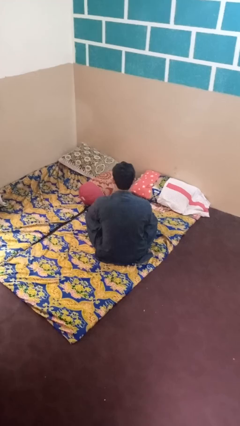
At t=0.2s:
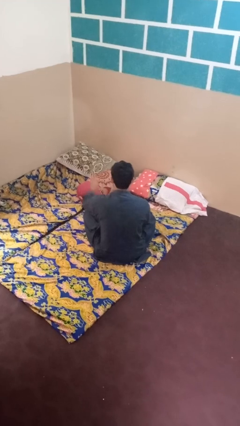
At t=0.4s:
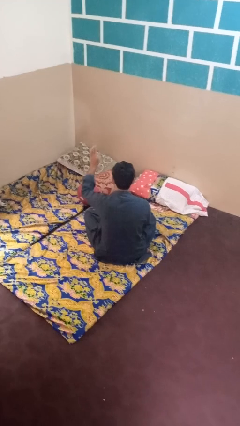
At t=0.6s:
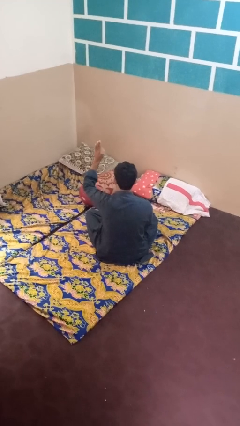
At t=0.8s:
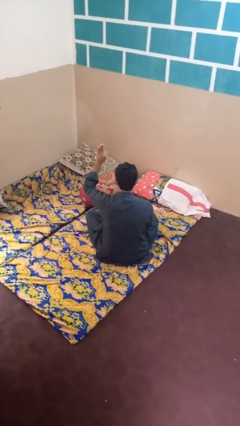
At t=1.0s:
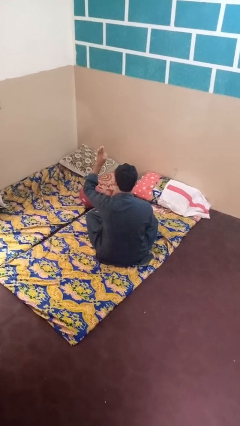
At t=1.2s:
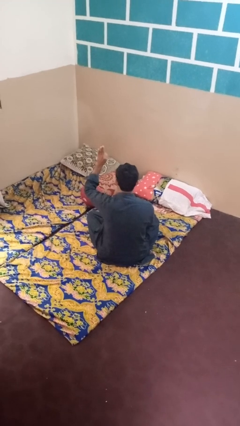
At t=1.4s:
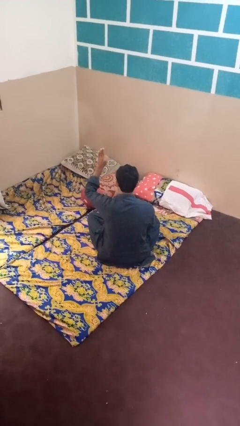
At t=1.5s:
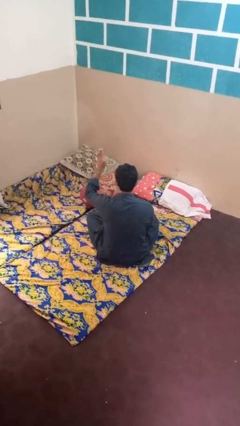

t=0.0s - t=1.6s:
person gestures number three

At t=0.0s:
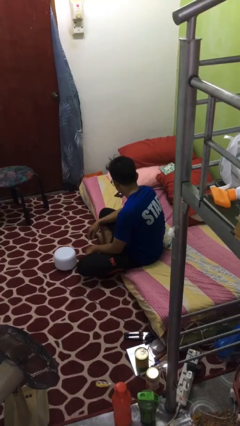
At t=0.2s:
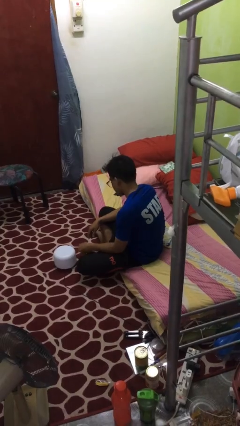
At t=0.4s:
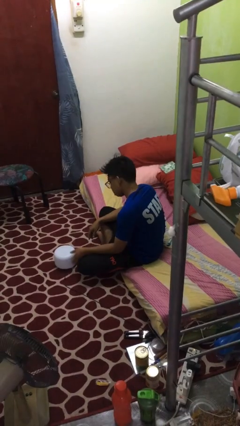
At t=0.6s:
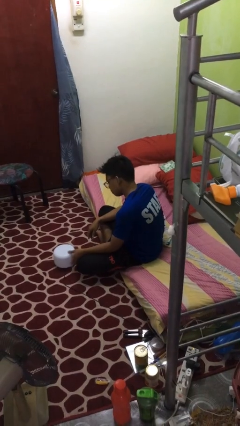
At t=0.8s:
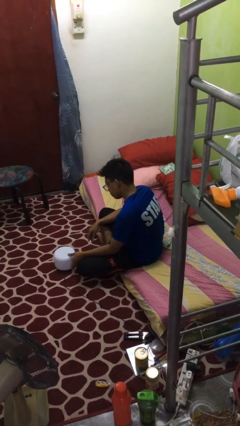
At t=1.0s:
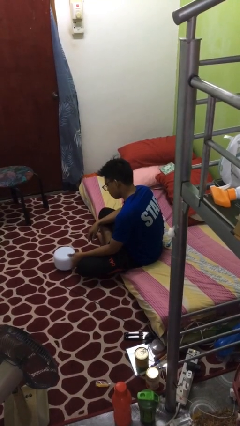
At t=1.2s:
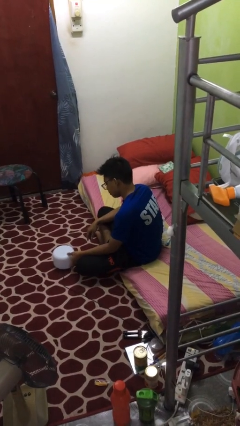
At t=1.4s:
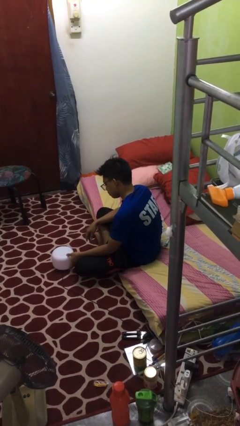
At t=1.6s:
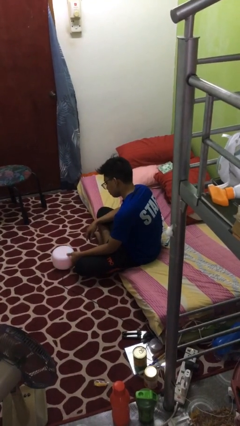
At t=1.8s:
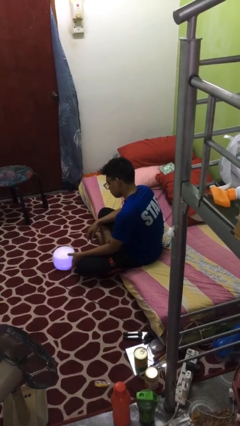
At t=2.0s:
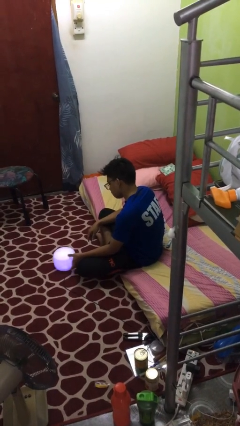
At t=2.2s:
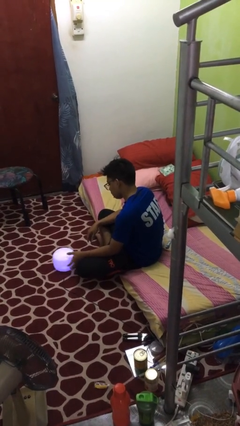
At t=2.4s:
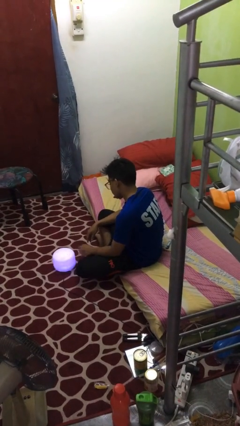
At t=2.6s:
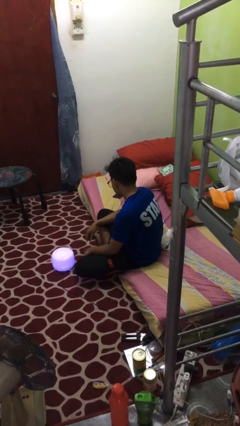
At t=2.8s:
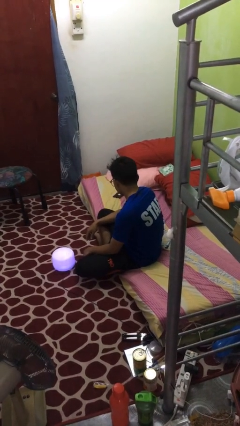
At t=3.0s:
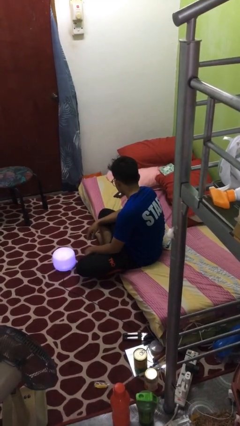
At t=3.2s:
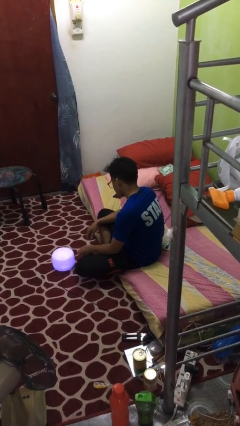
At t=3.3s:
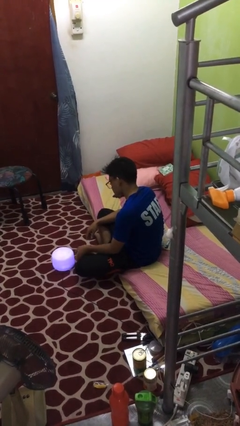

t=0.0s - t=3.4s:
person turns on lamp

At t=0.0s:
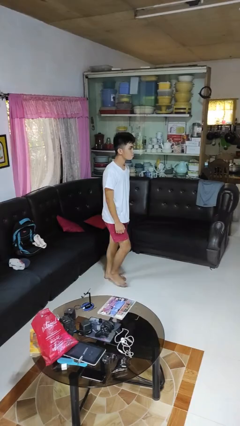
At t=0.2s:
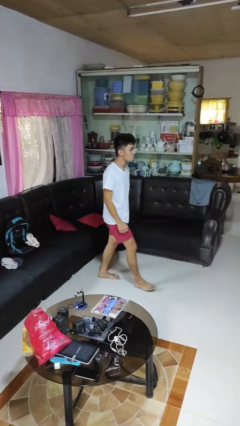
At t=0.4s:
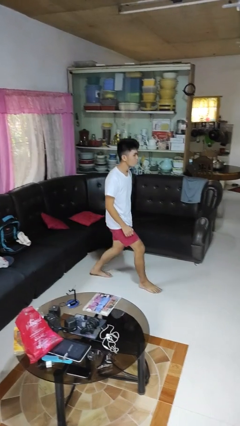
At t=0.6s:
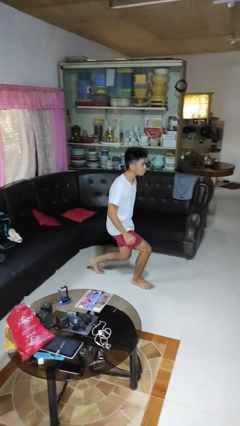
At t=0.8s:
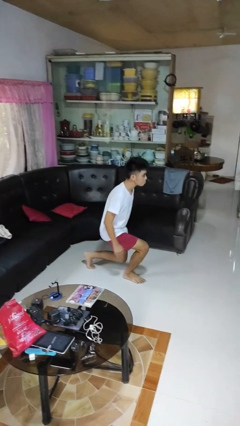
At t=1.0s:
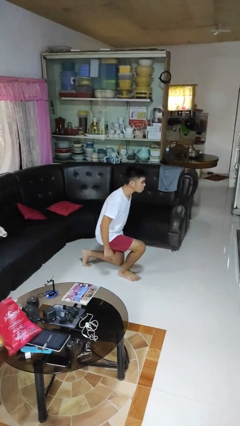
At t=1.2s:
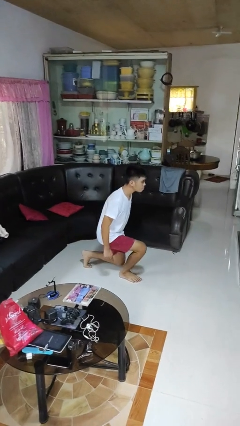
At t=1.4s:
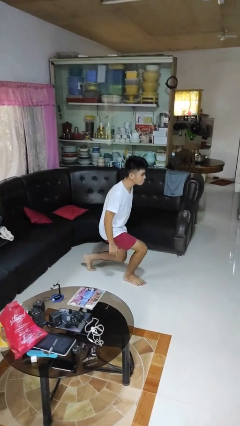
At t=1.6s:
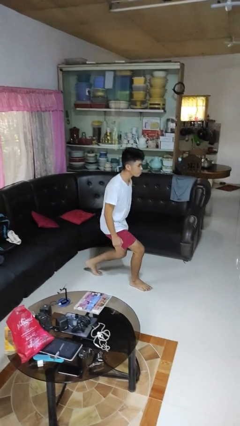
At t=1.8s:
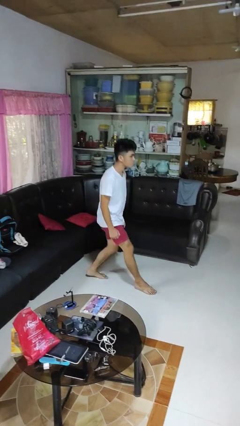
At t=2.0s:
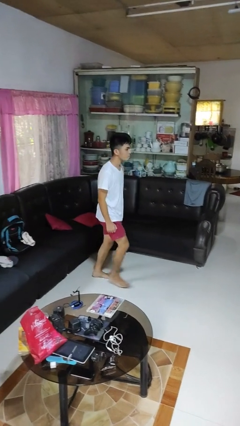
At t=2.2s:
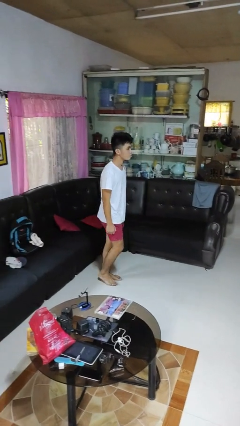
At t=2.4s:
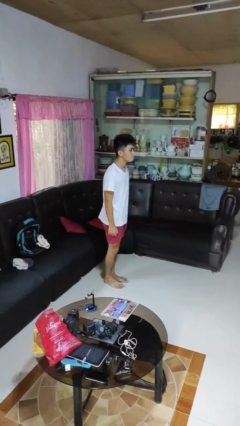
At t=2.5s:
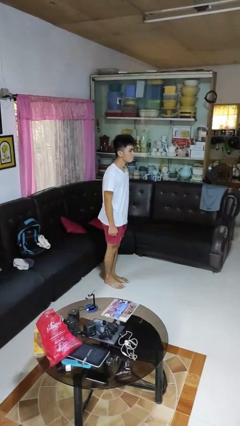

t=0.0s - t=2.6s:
person exercises with lunges

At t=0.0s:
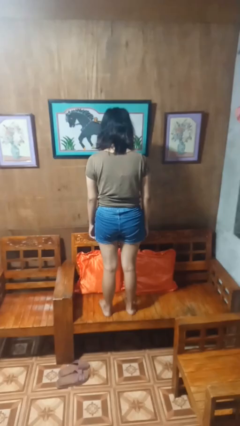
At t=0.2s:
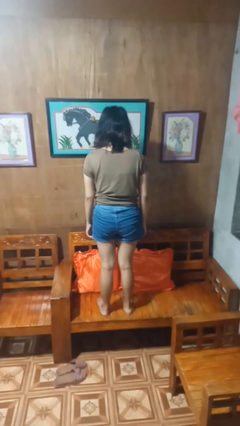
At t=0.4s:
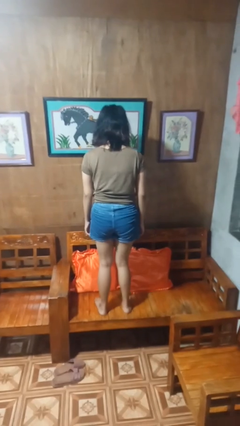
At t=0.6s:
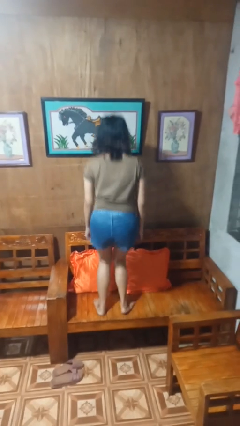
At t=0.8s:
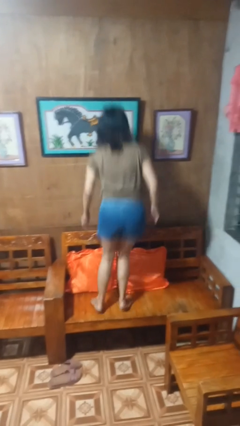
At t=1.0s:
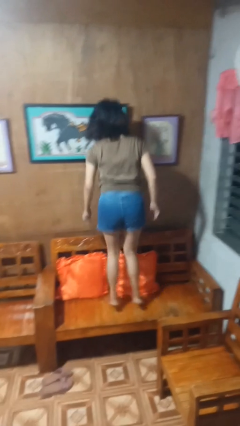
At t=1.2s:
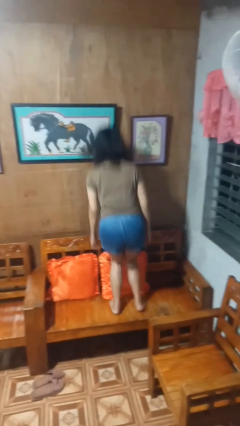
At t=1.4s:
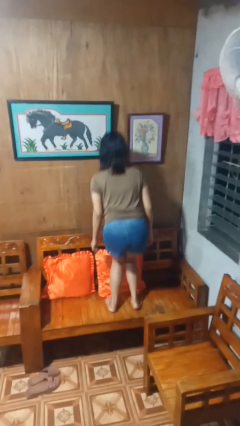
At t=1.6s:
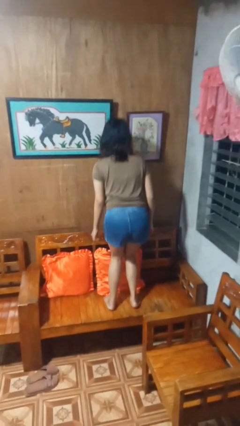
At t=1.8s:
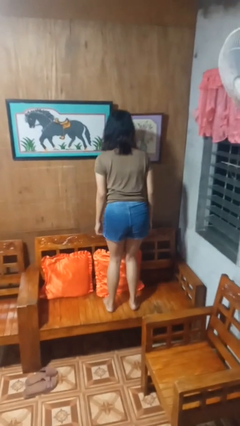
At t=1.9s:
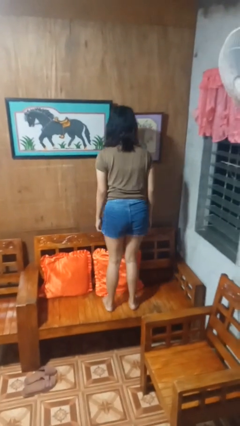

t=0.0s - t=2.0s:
person jumps on couch

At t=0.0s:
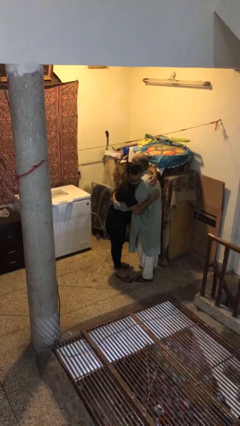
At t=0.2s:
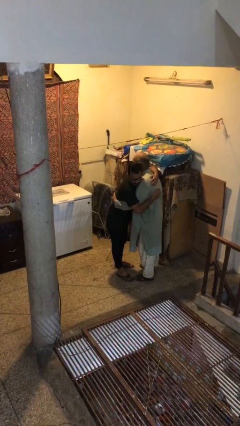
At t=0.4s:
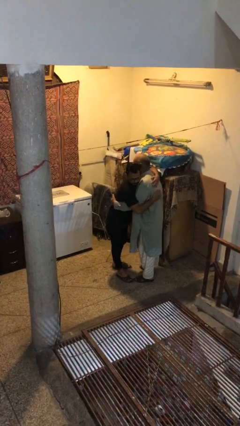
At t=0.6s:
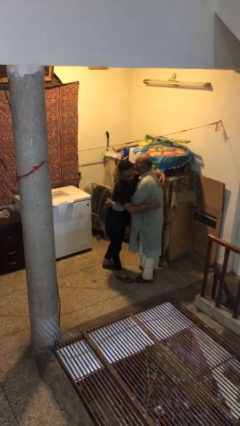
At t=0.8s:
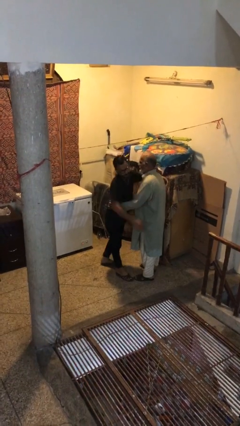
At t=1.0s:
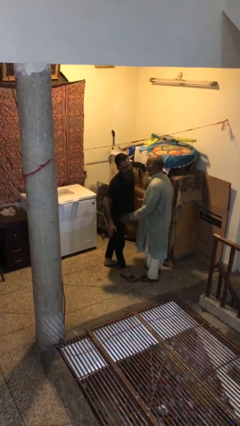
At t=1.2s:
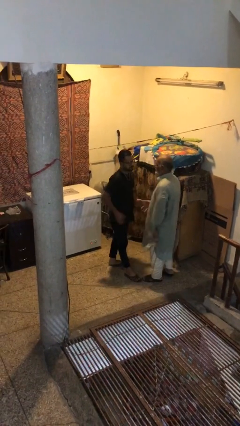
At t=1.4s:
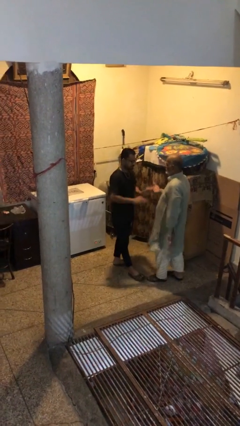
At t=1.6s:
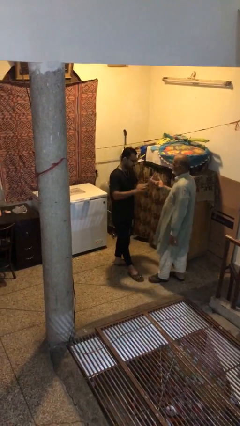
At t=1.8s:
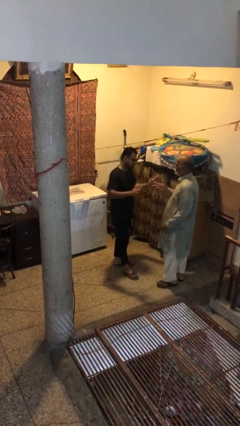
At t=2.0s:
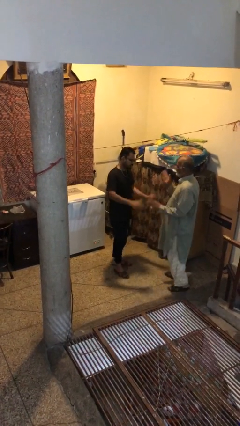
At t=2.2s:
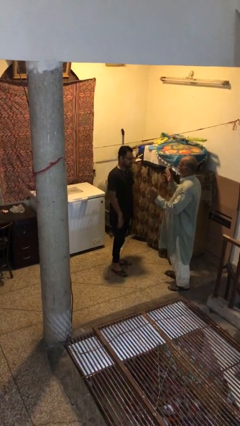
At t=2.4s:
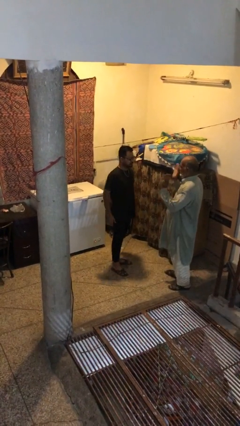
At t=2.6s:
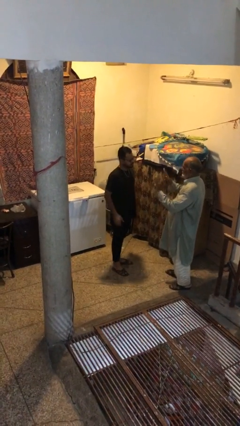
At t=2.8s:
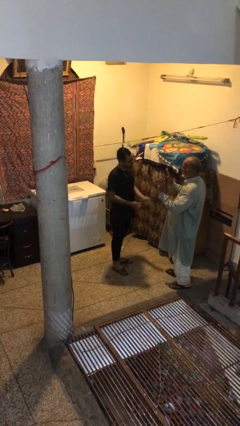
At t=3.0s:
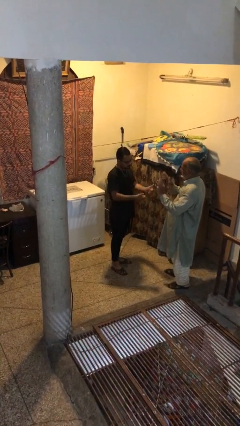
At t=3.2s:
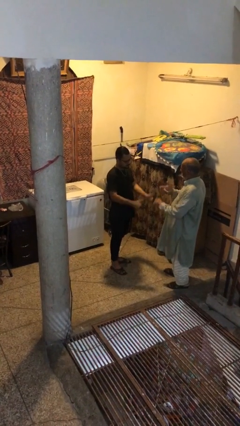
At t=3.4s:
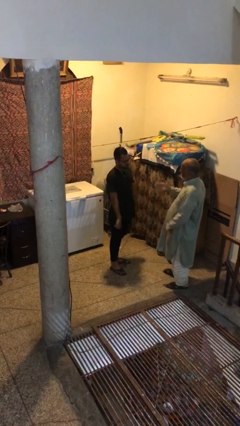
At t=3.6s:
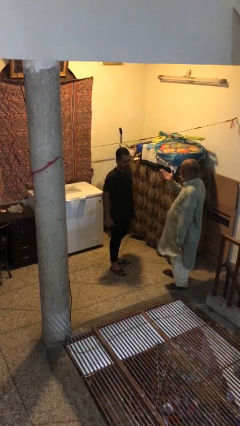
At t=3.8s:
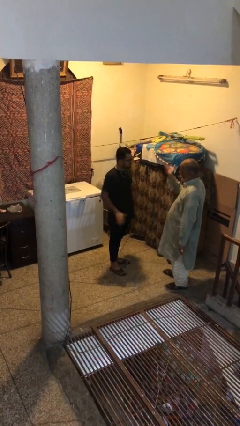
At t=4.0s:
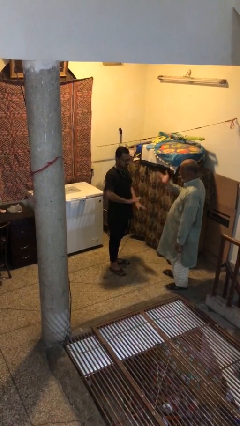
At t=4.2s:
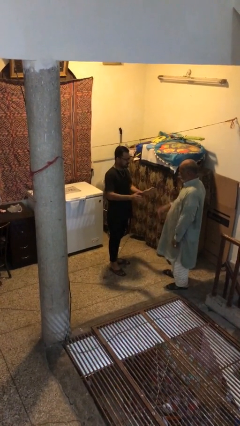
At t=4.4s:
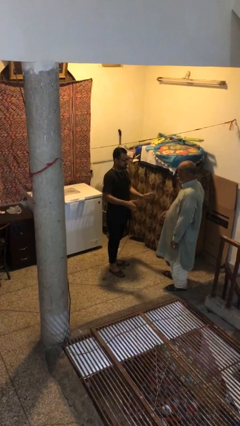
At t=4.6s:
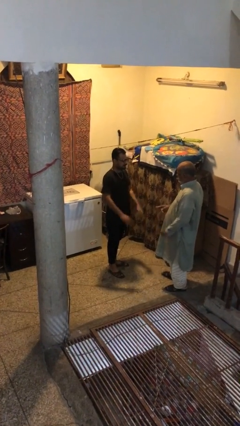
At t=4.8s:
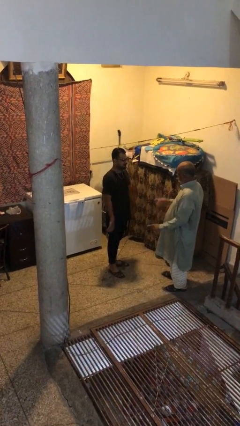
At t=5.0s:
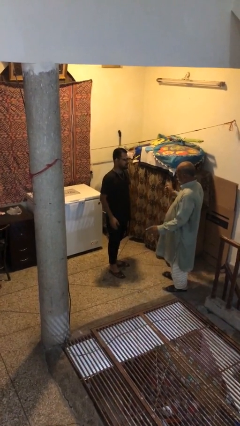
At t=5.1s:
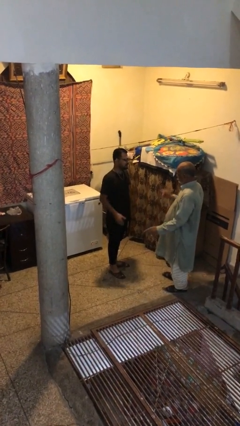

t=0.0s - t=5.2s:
person talks to person

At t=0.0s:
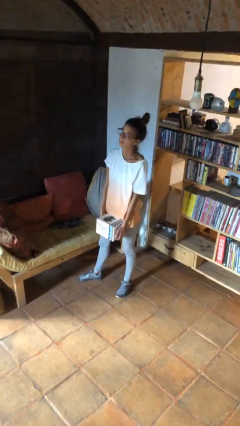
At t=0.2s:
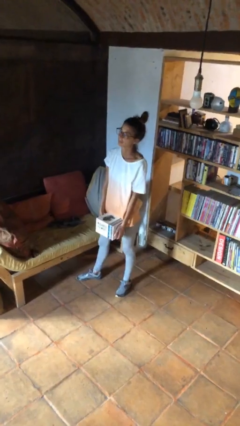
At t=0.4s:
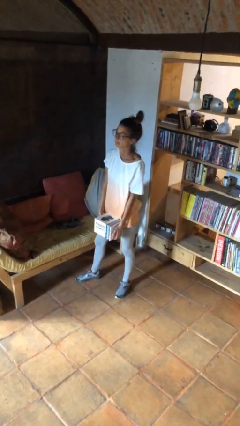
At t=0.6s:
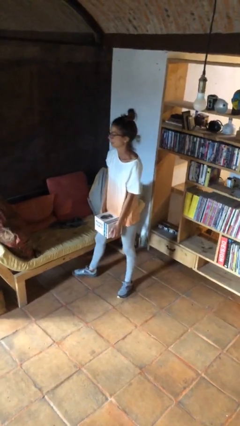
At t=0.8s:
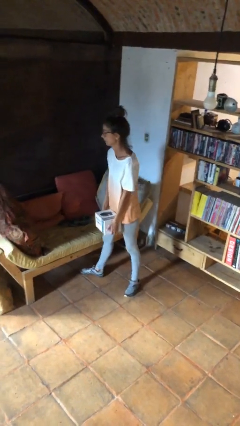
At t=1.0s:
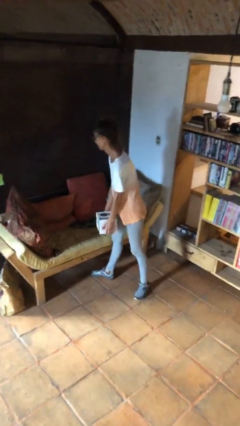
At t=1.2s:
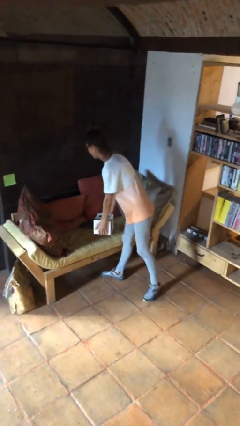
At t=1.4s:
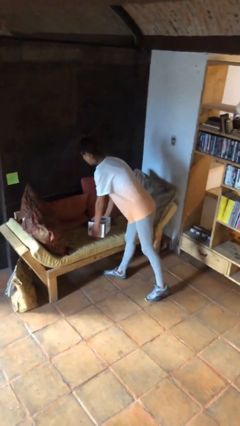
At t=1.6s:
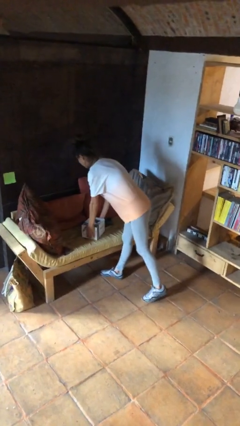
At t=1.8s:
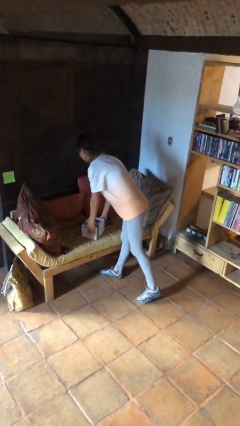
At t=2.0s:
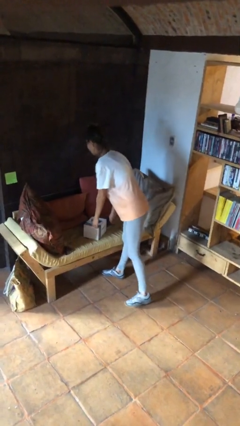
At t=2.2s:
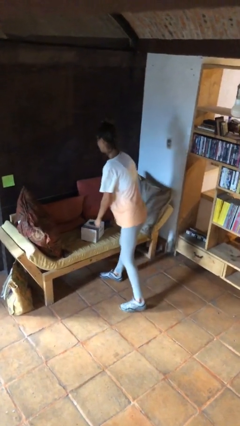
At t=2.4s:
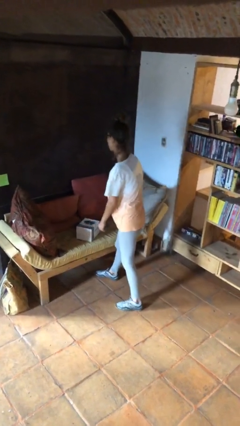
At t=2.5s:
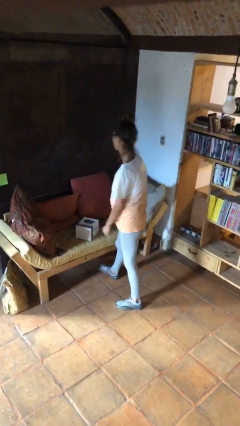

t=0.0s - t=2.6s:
person puts down object on couch
